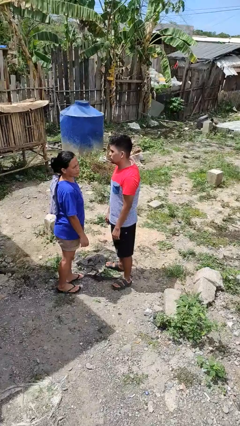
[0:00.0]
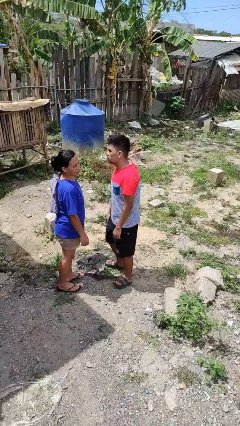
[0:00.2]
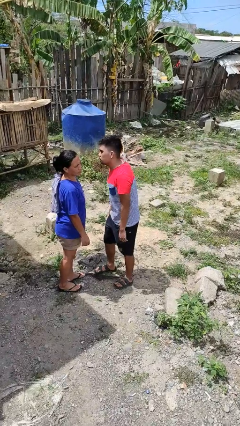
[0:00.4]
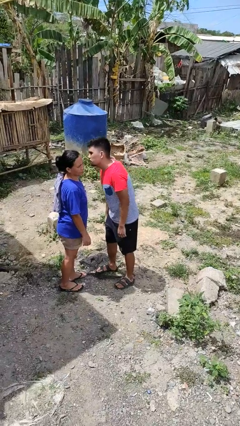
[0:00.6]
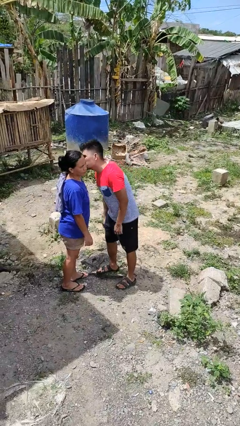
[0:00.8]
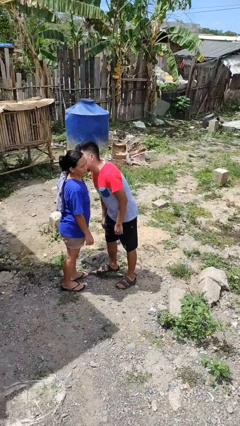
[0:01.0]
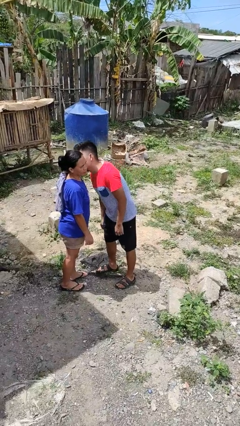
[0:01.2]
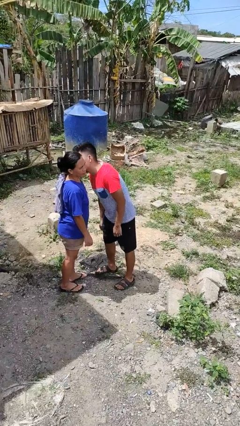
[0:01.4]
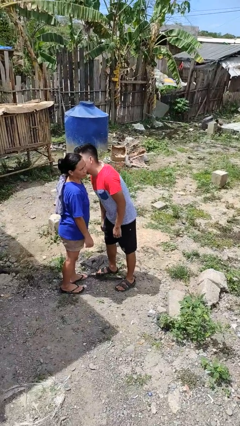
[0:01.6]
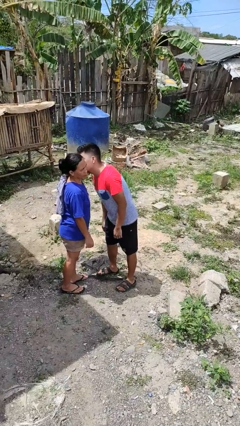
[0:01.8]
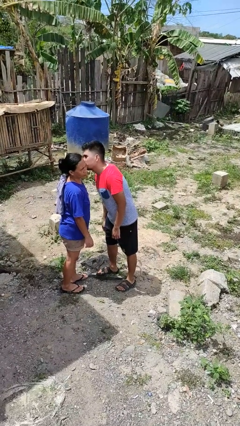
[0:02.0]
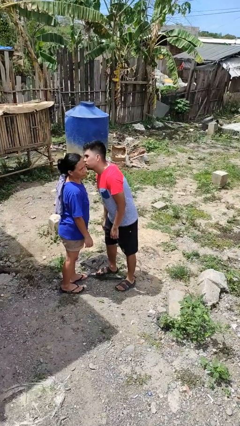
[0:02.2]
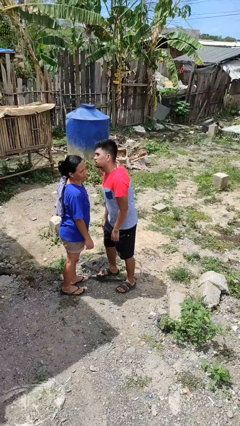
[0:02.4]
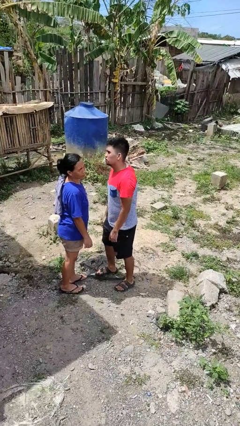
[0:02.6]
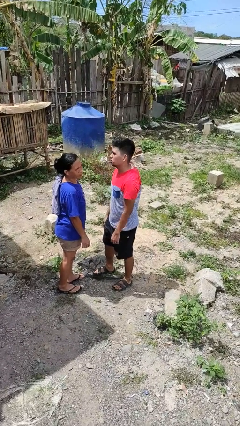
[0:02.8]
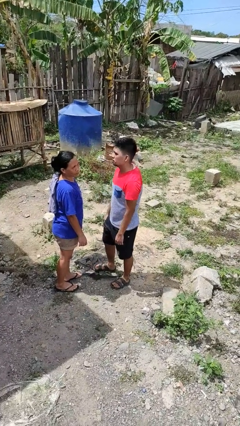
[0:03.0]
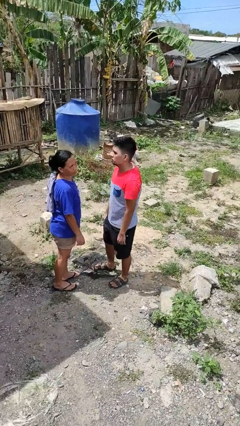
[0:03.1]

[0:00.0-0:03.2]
person kisses cheek of person

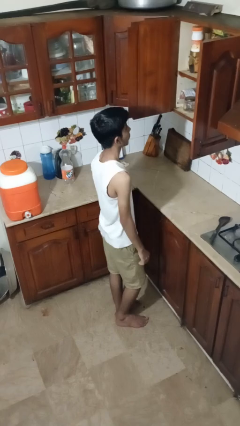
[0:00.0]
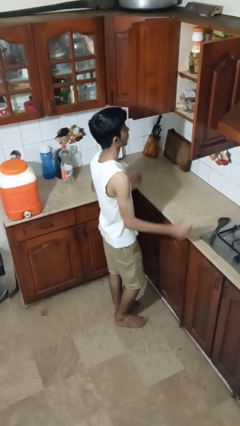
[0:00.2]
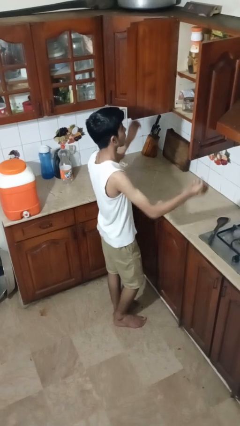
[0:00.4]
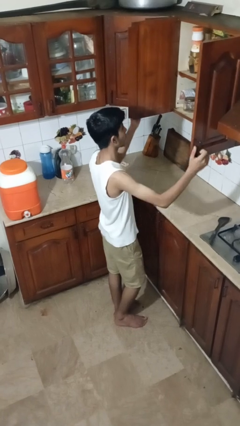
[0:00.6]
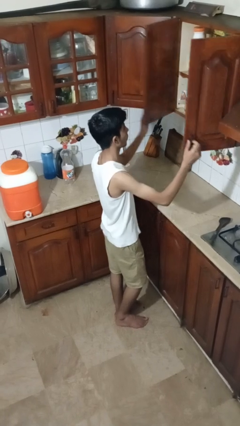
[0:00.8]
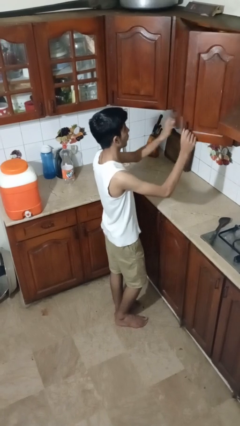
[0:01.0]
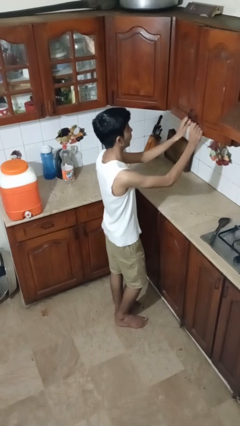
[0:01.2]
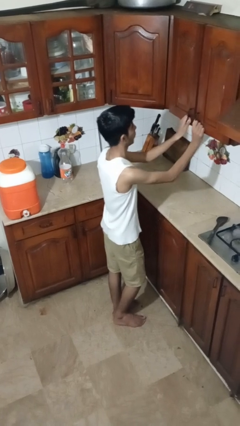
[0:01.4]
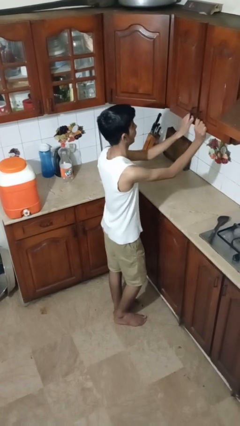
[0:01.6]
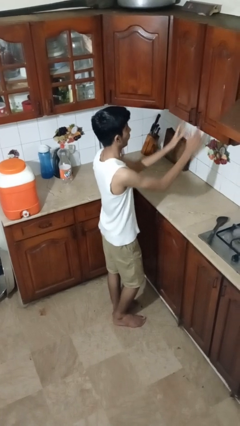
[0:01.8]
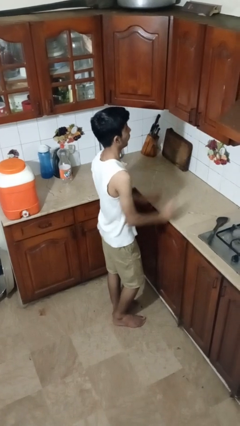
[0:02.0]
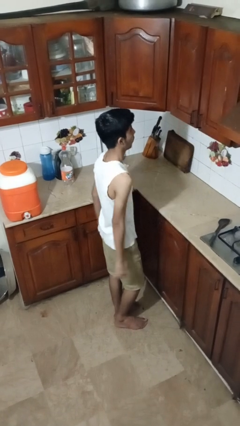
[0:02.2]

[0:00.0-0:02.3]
person closes cabinet

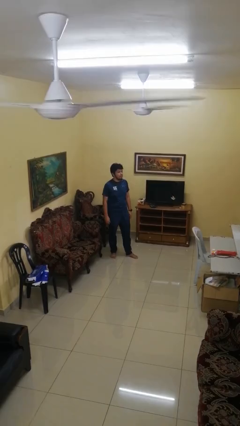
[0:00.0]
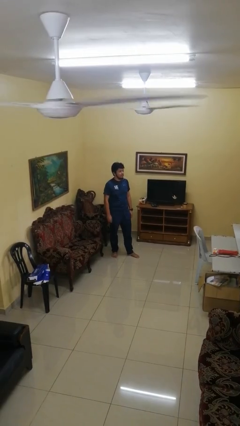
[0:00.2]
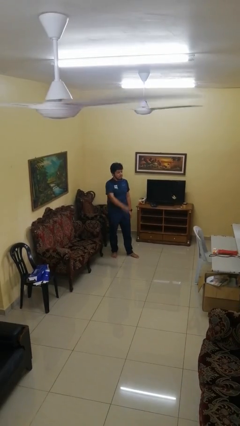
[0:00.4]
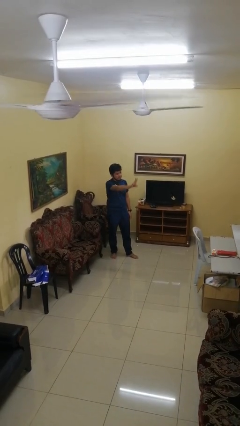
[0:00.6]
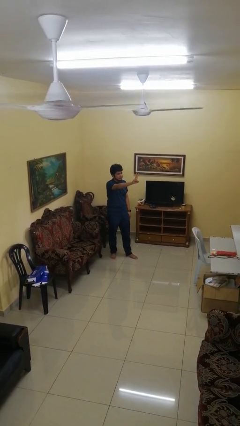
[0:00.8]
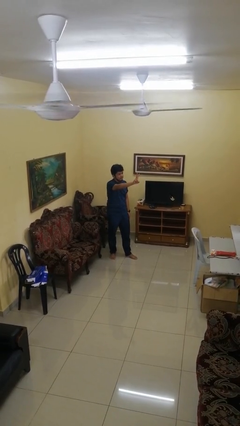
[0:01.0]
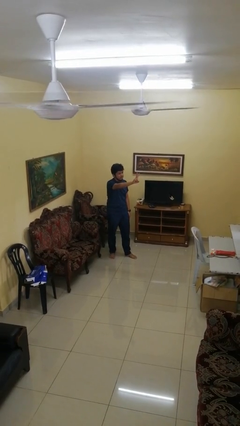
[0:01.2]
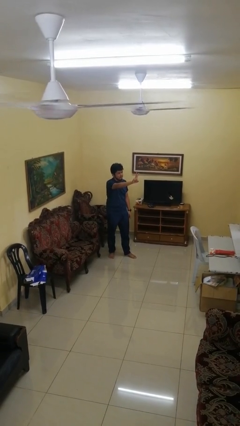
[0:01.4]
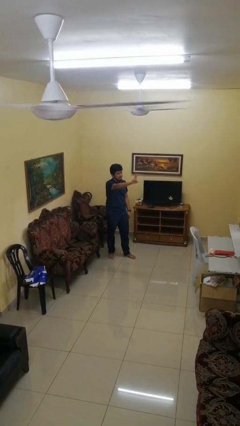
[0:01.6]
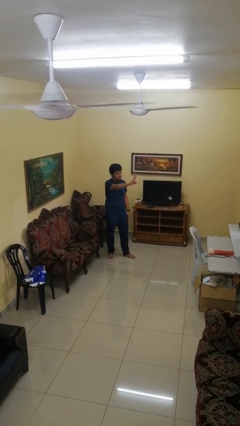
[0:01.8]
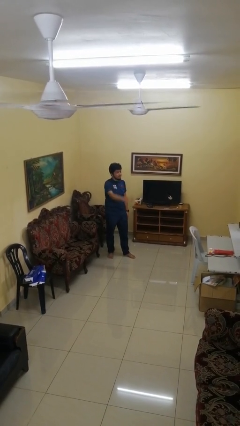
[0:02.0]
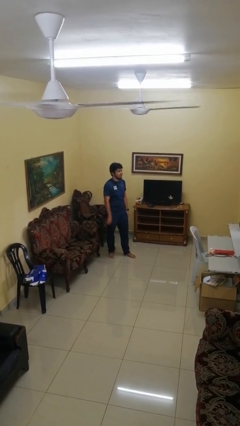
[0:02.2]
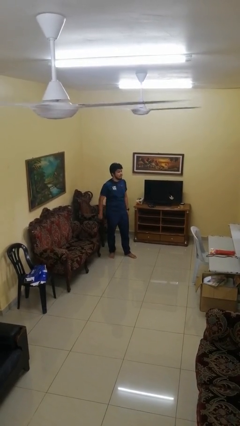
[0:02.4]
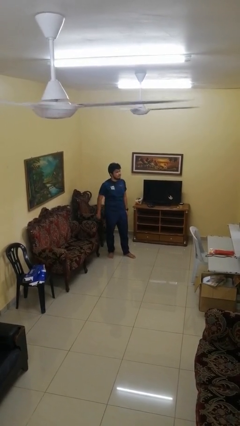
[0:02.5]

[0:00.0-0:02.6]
person gestures peace

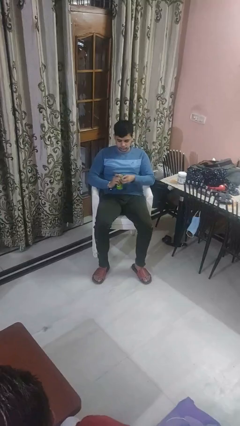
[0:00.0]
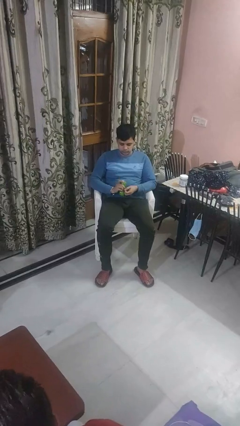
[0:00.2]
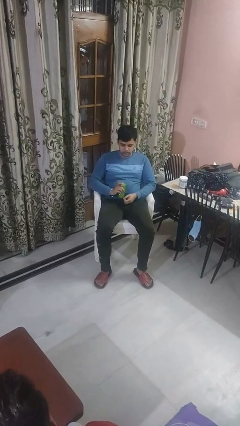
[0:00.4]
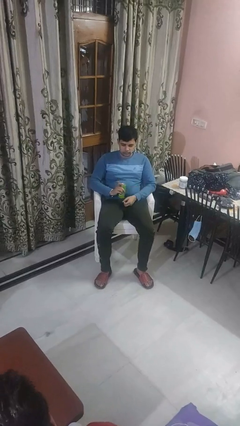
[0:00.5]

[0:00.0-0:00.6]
person opens beverage can

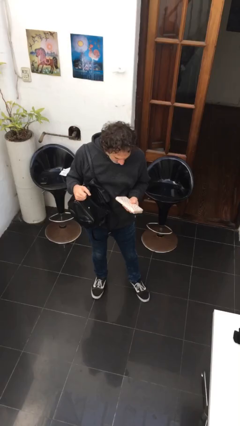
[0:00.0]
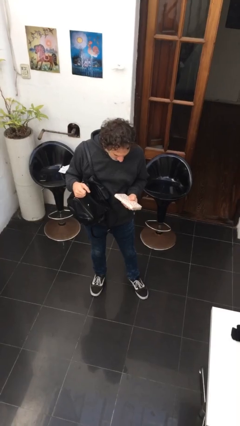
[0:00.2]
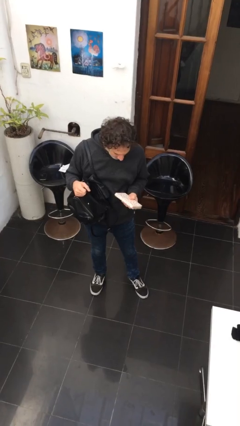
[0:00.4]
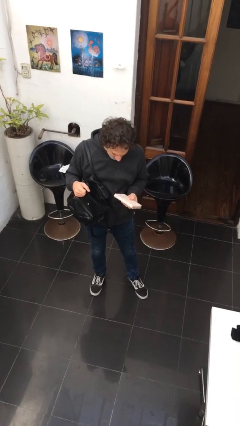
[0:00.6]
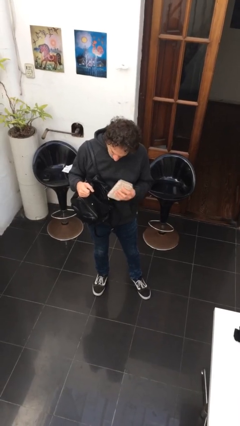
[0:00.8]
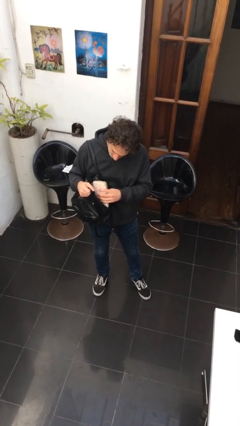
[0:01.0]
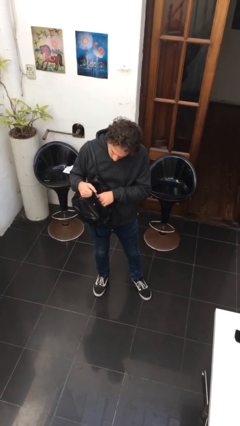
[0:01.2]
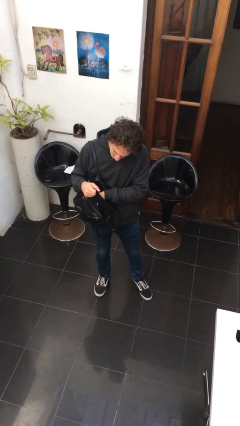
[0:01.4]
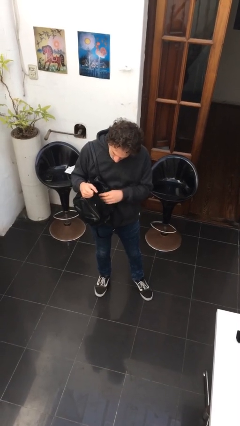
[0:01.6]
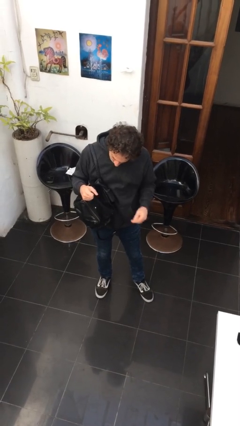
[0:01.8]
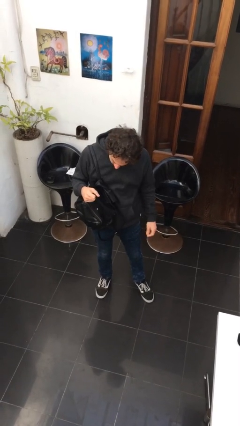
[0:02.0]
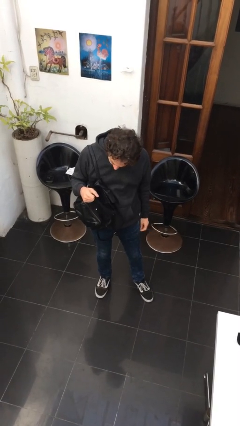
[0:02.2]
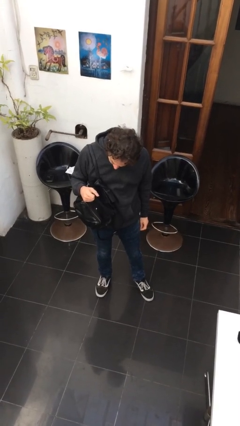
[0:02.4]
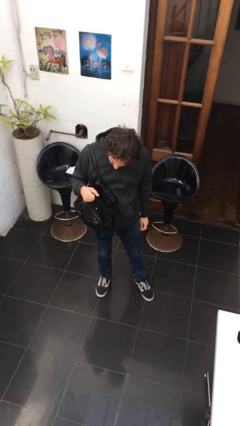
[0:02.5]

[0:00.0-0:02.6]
person puts object into purse

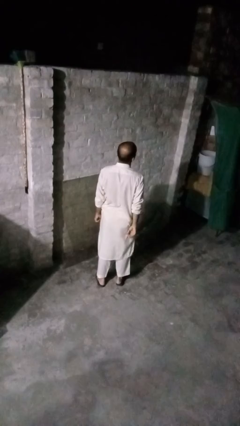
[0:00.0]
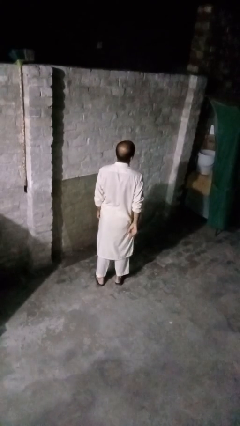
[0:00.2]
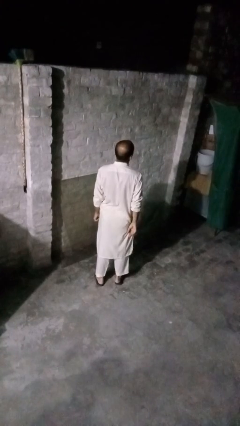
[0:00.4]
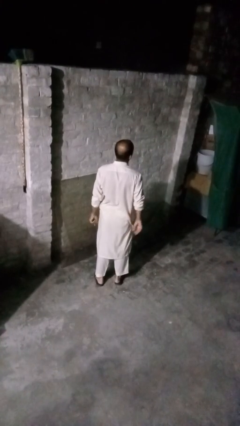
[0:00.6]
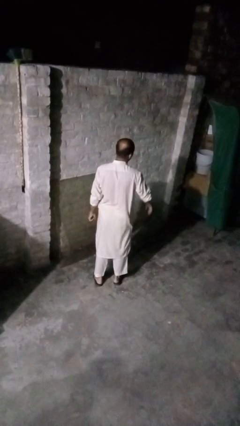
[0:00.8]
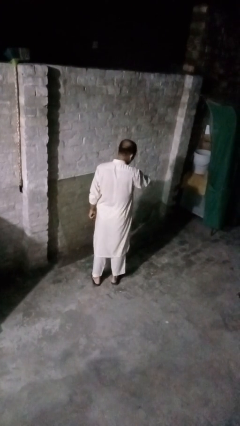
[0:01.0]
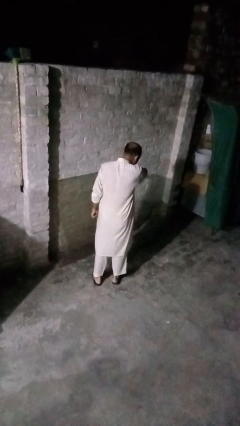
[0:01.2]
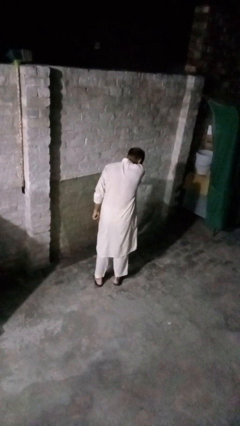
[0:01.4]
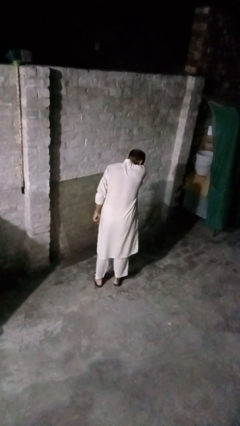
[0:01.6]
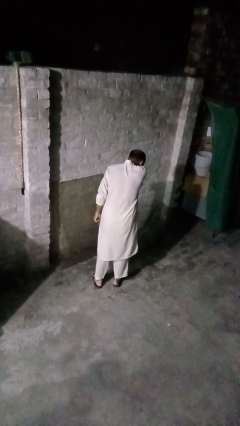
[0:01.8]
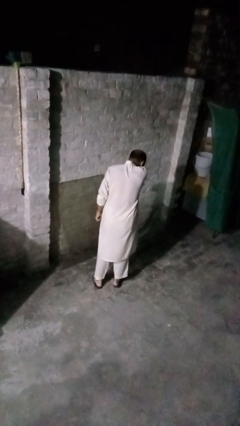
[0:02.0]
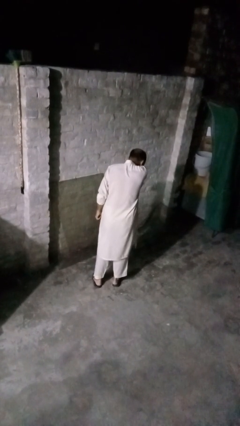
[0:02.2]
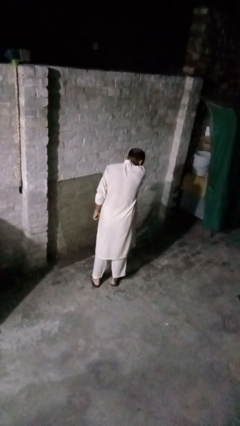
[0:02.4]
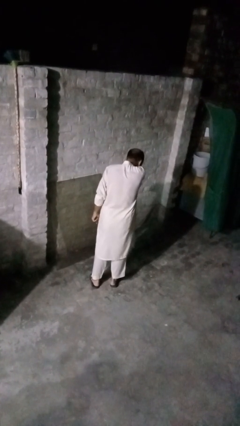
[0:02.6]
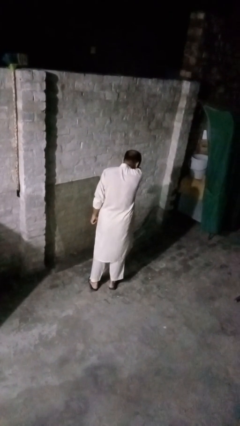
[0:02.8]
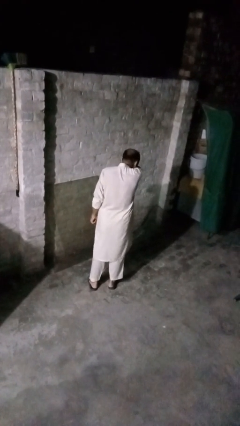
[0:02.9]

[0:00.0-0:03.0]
person sneezes into arm

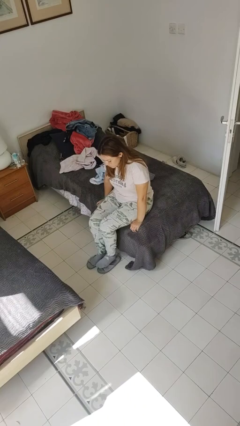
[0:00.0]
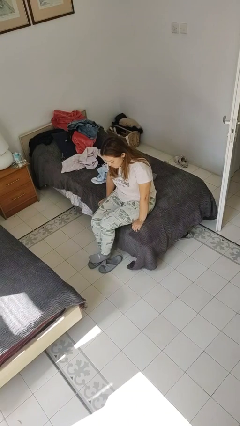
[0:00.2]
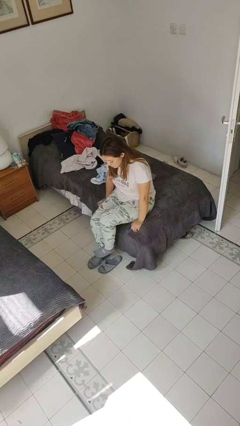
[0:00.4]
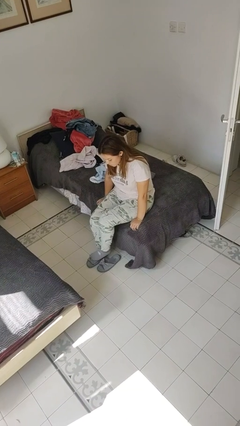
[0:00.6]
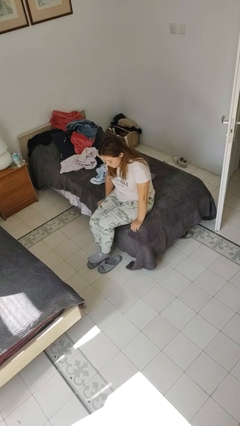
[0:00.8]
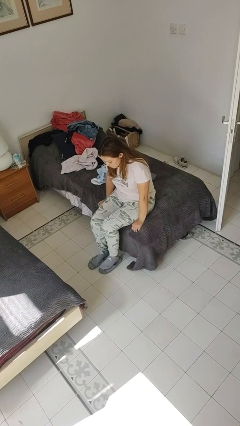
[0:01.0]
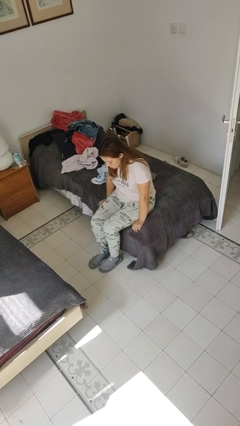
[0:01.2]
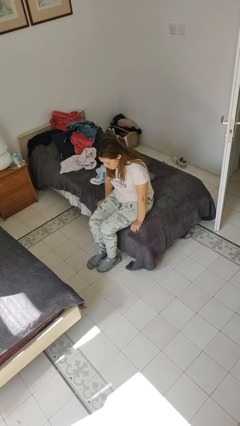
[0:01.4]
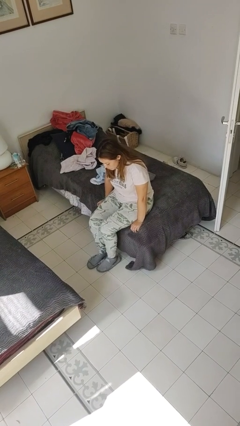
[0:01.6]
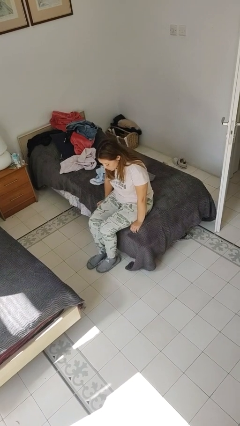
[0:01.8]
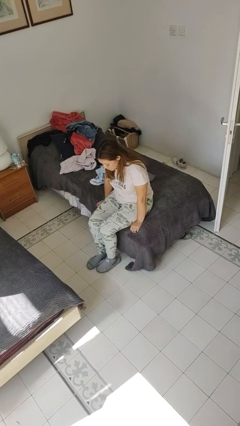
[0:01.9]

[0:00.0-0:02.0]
person rubs foot

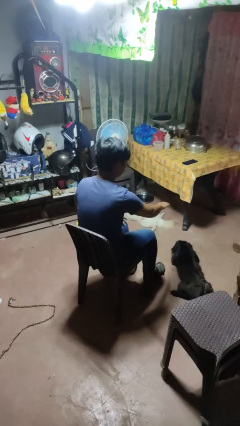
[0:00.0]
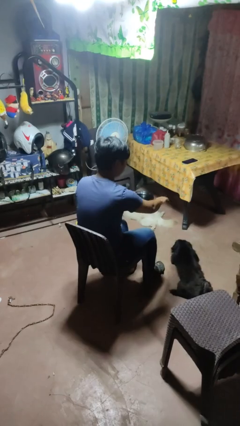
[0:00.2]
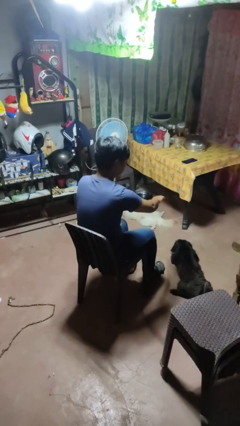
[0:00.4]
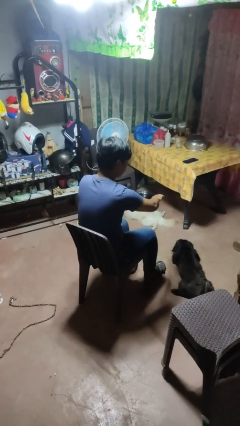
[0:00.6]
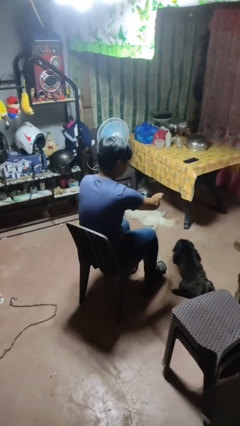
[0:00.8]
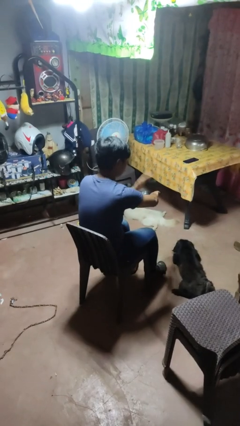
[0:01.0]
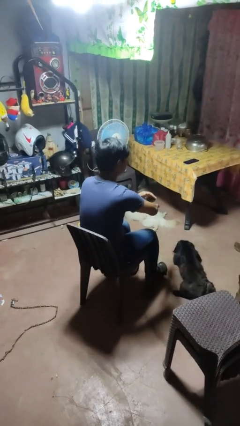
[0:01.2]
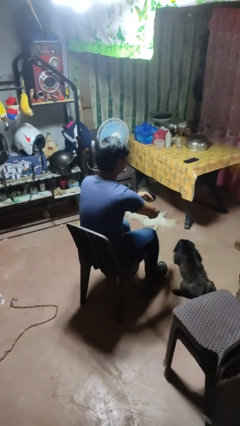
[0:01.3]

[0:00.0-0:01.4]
person swats bug
